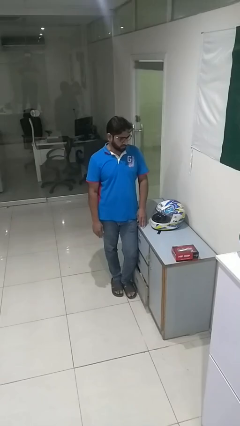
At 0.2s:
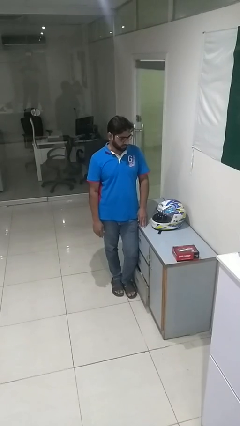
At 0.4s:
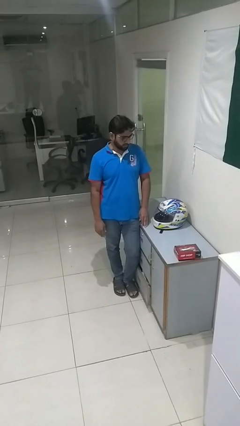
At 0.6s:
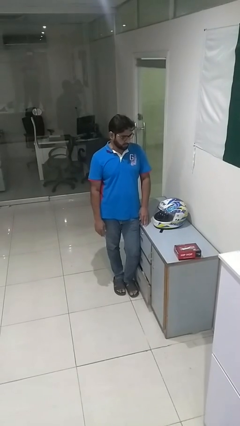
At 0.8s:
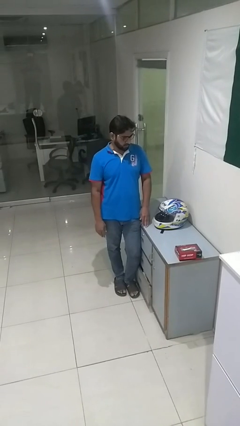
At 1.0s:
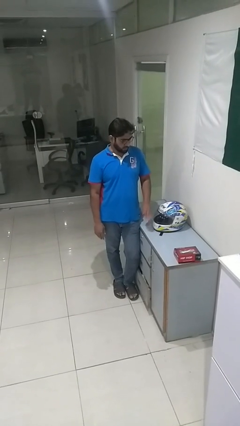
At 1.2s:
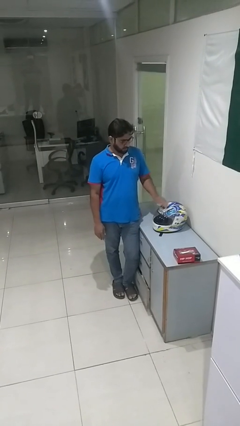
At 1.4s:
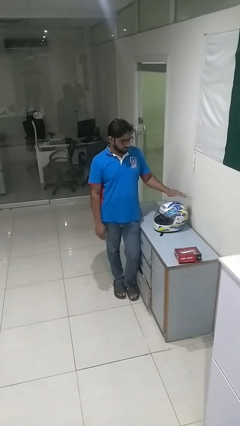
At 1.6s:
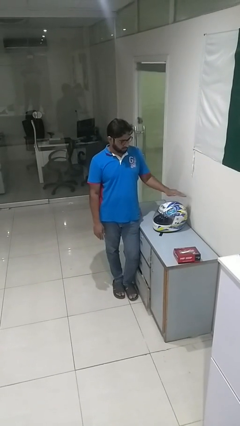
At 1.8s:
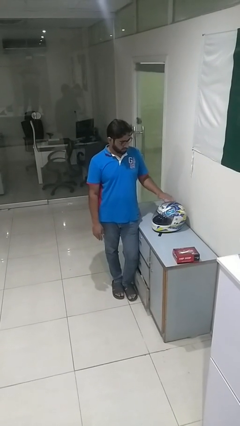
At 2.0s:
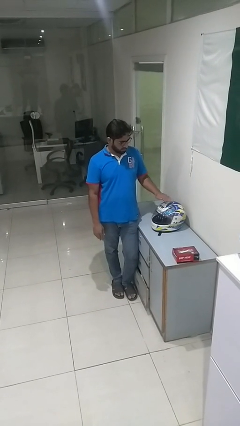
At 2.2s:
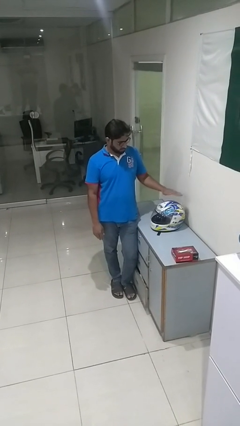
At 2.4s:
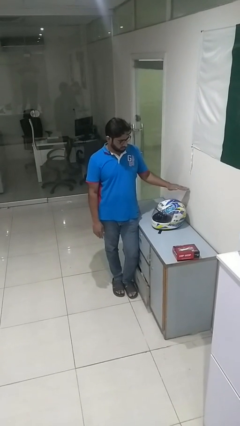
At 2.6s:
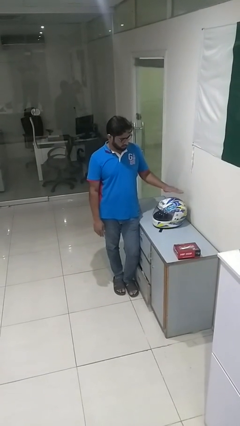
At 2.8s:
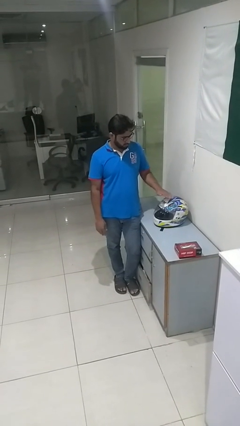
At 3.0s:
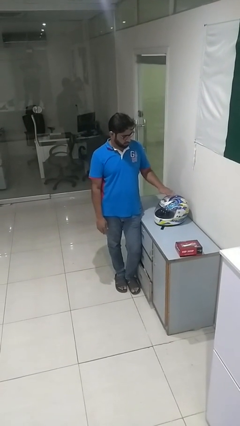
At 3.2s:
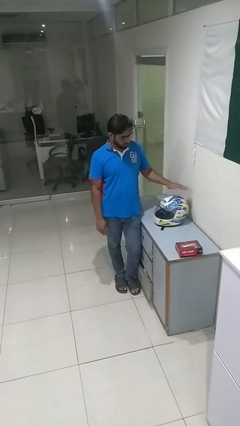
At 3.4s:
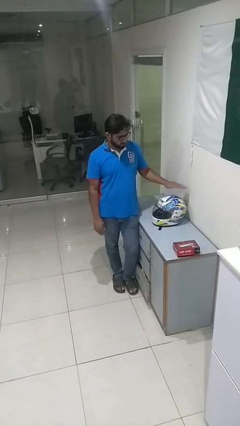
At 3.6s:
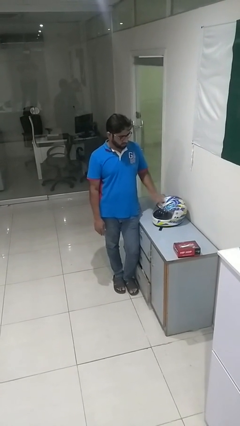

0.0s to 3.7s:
person waves hand over object

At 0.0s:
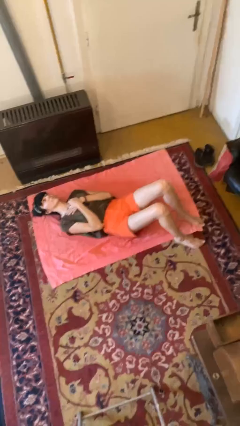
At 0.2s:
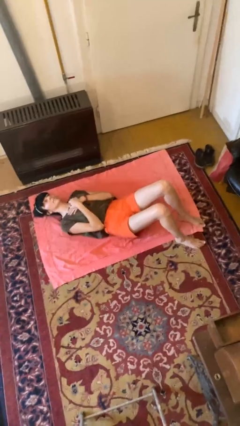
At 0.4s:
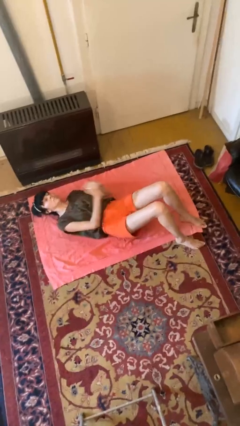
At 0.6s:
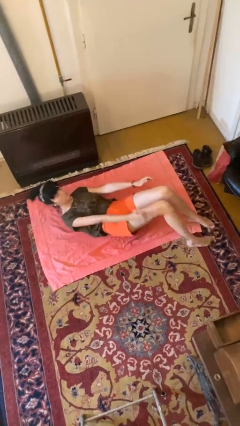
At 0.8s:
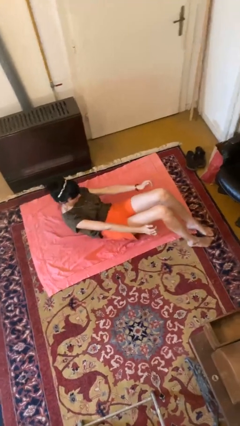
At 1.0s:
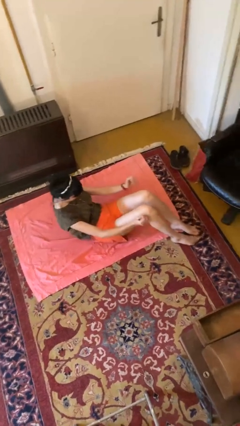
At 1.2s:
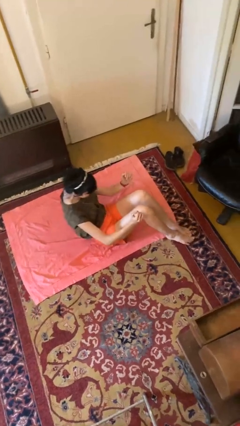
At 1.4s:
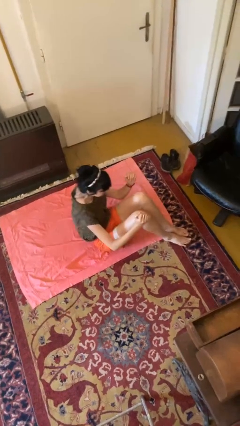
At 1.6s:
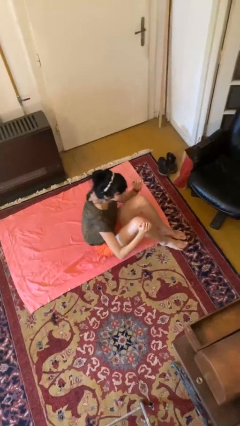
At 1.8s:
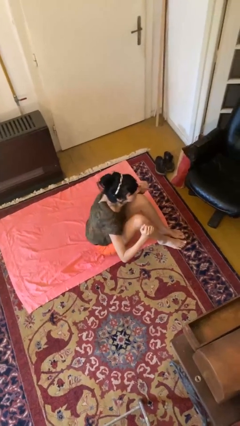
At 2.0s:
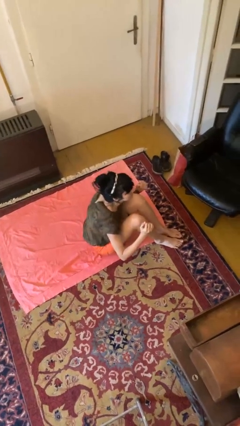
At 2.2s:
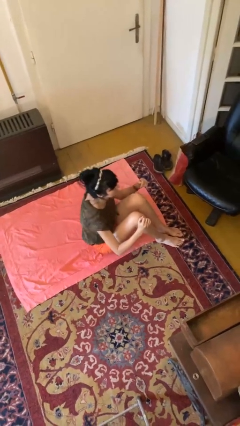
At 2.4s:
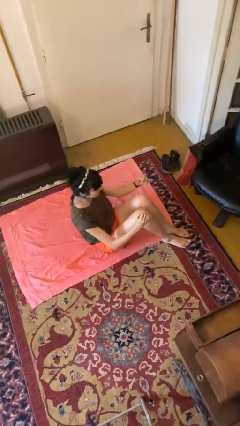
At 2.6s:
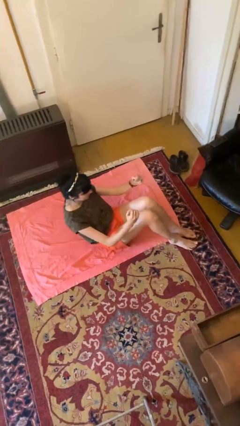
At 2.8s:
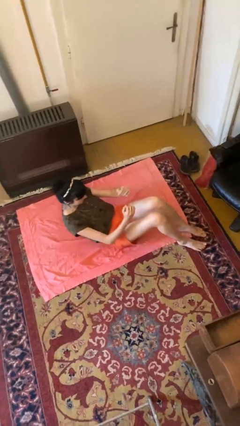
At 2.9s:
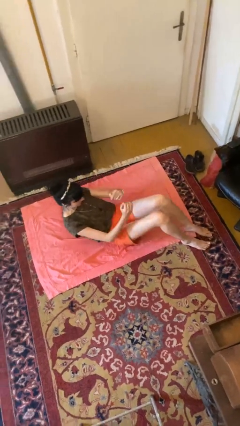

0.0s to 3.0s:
person exercises with situp

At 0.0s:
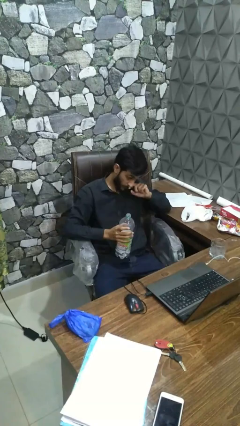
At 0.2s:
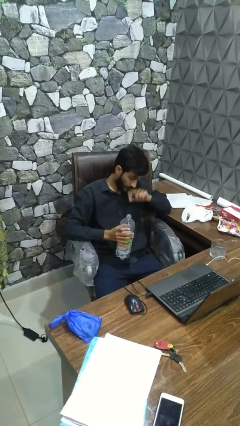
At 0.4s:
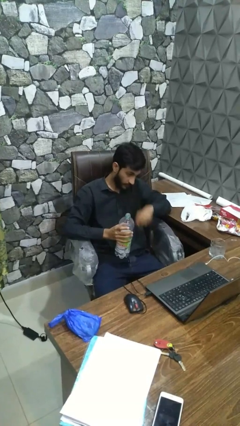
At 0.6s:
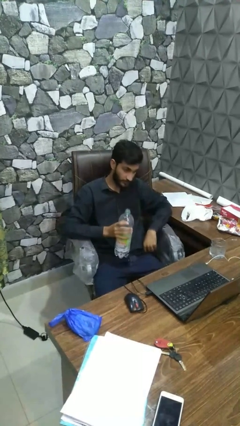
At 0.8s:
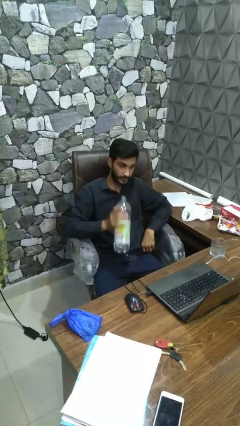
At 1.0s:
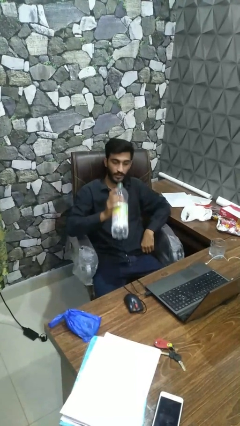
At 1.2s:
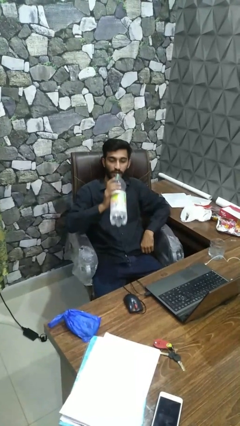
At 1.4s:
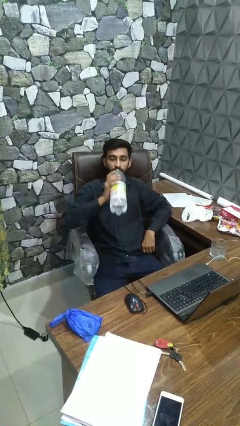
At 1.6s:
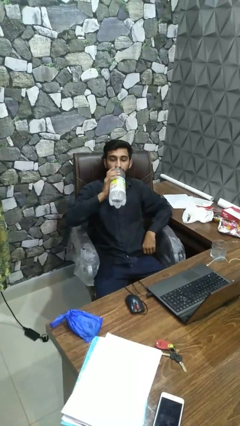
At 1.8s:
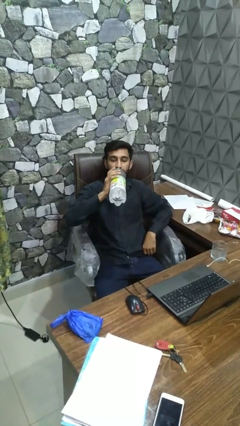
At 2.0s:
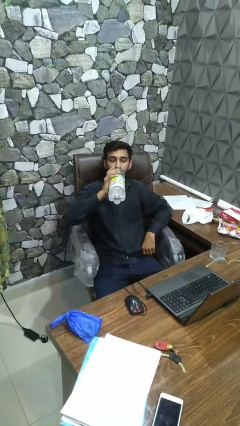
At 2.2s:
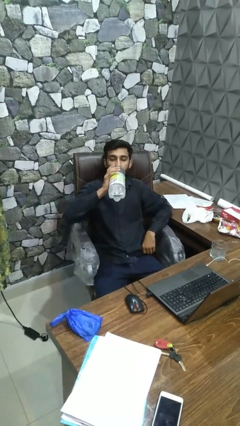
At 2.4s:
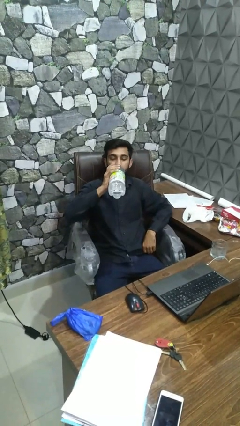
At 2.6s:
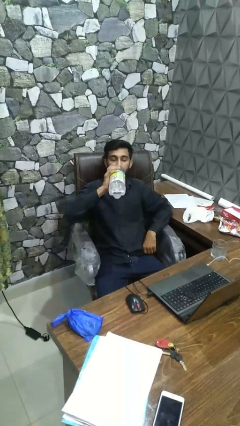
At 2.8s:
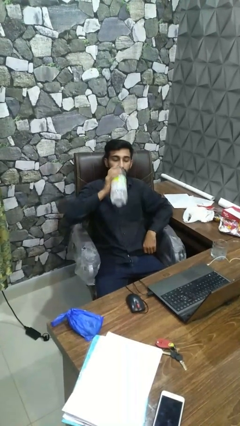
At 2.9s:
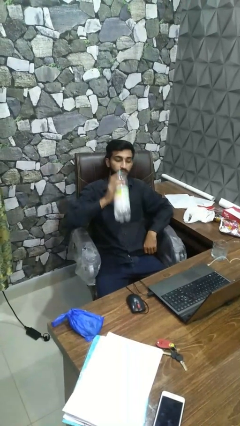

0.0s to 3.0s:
person drinks from bottle

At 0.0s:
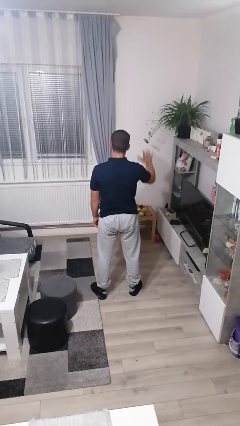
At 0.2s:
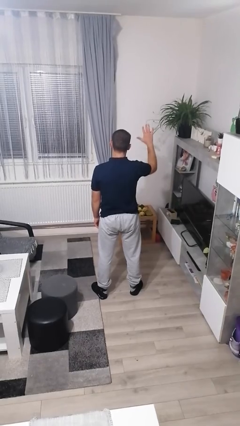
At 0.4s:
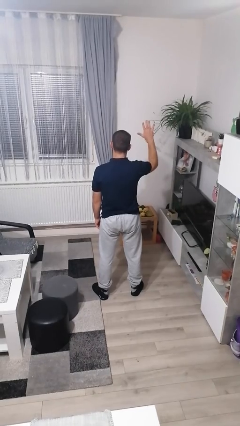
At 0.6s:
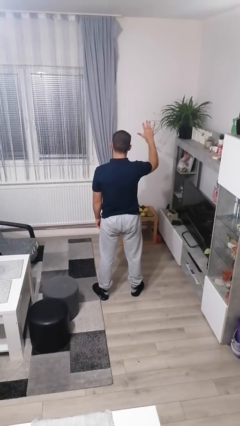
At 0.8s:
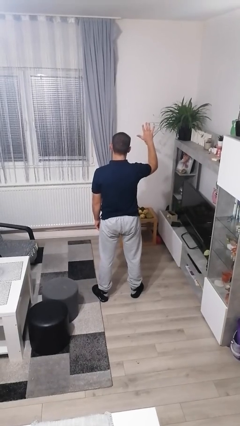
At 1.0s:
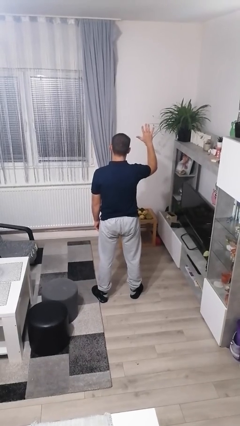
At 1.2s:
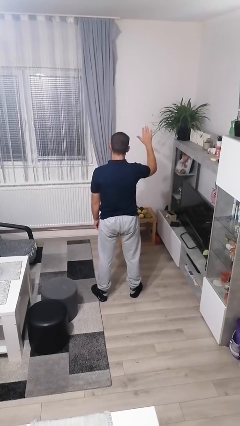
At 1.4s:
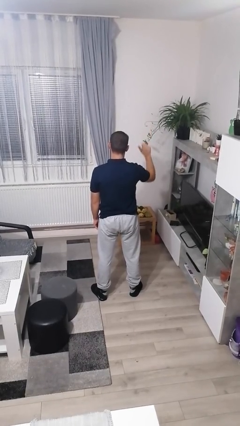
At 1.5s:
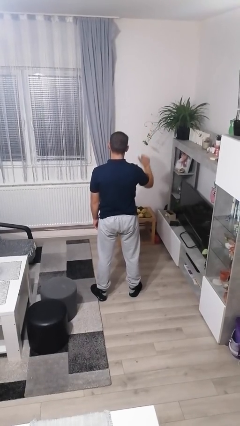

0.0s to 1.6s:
person gestures number five

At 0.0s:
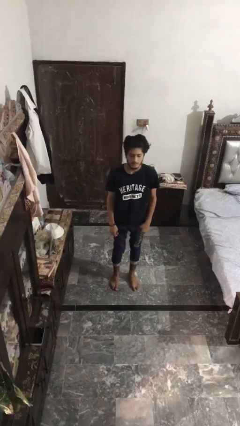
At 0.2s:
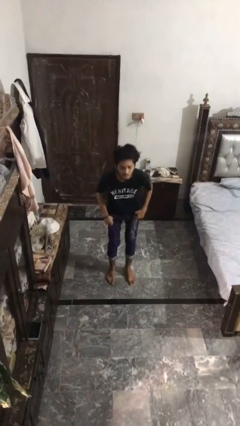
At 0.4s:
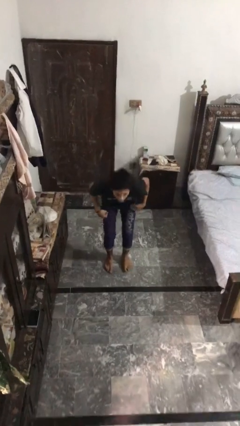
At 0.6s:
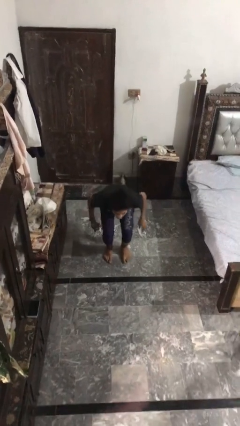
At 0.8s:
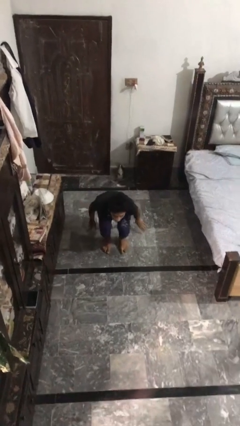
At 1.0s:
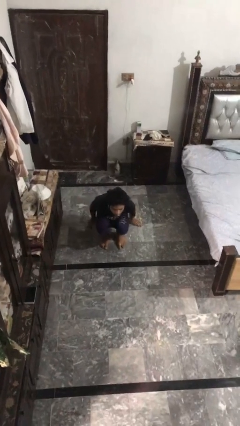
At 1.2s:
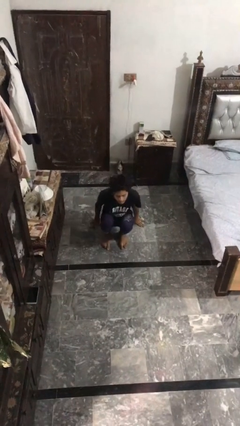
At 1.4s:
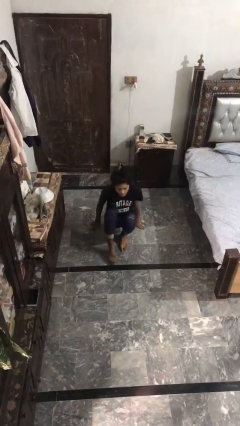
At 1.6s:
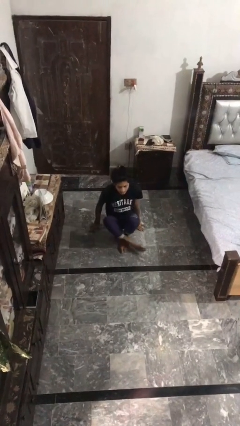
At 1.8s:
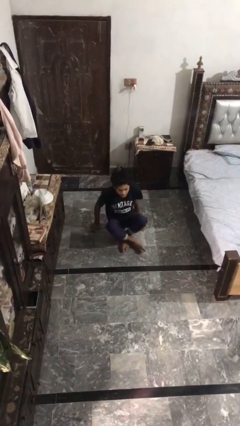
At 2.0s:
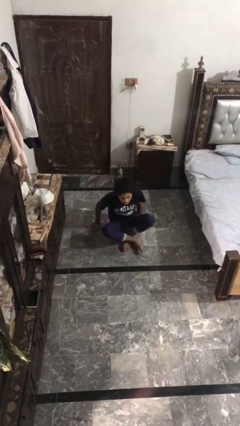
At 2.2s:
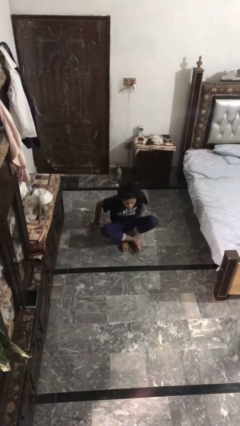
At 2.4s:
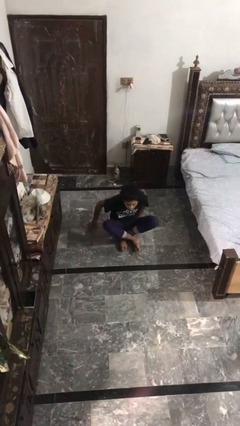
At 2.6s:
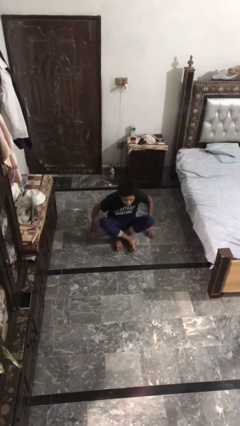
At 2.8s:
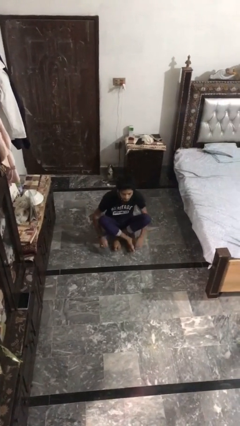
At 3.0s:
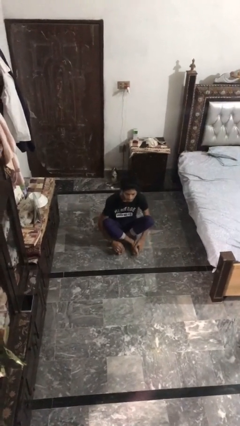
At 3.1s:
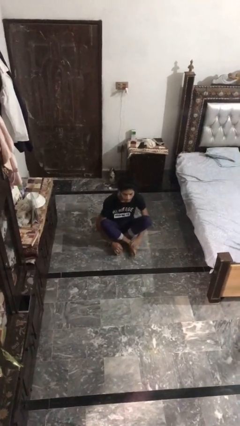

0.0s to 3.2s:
person sits crisscross

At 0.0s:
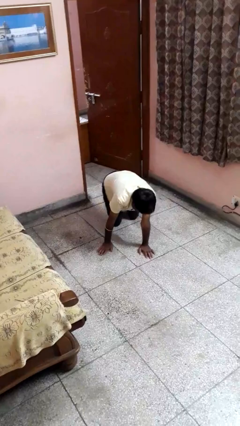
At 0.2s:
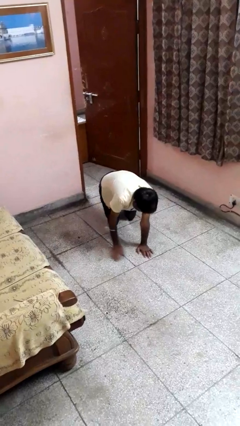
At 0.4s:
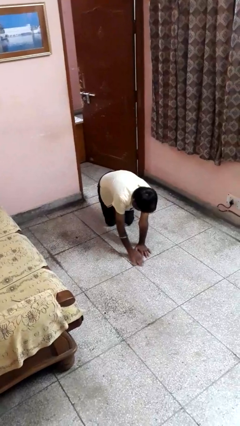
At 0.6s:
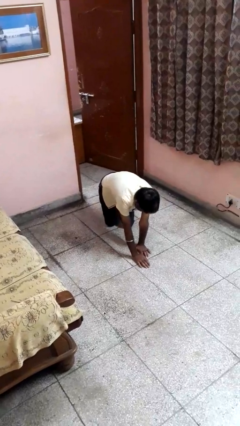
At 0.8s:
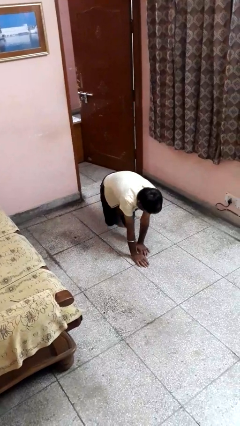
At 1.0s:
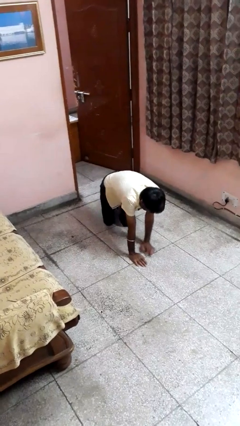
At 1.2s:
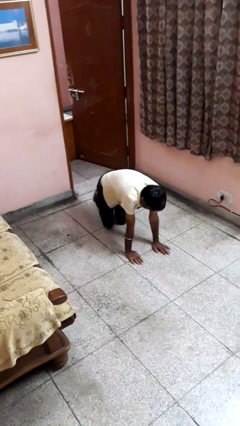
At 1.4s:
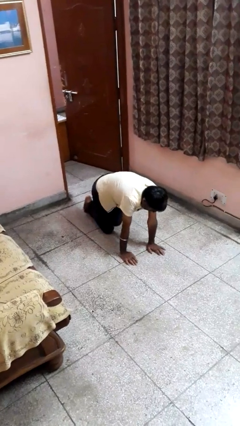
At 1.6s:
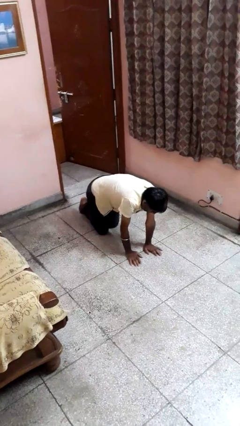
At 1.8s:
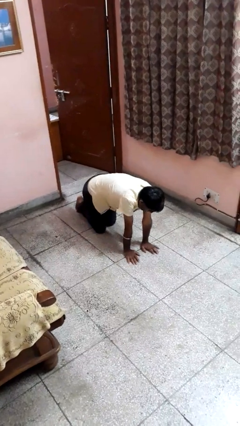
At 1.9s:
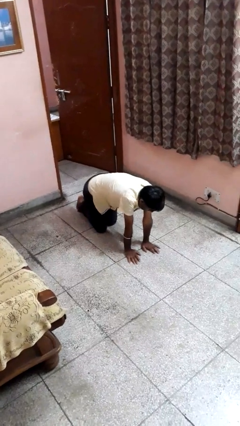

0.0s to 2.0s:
person crawls

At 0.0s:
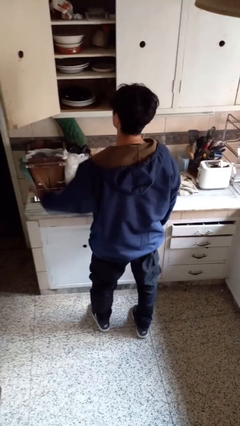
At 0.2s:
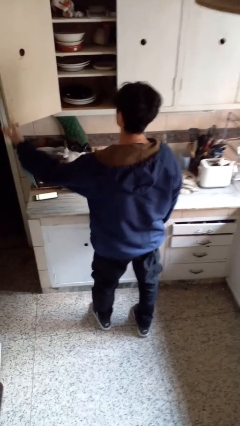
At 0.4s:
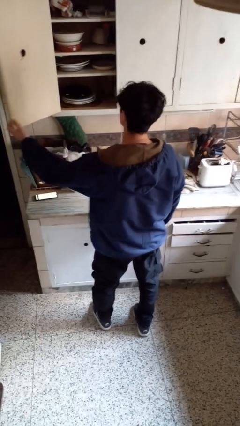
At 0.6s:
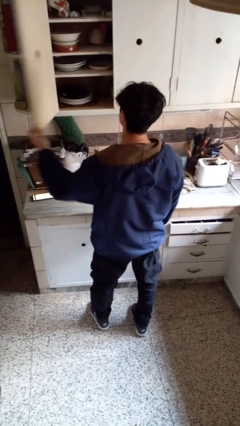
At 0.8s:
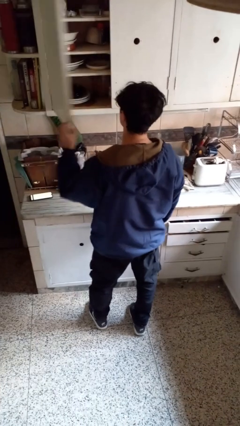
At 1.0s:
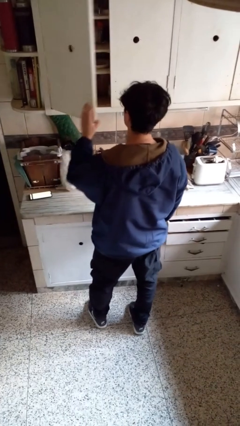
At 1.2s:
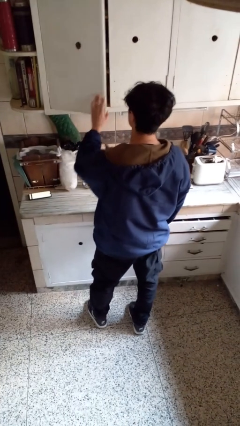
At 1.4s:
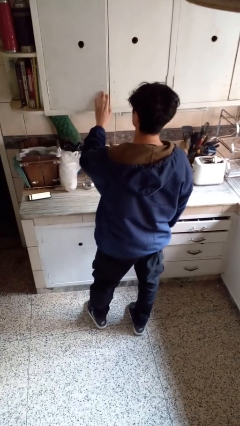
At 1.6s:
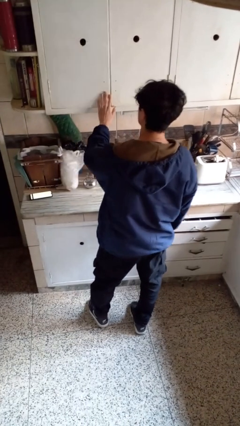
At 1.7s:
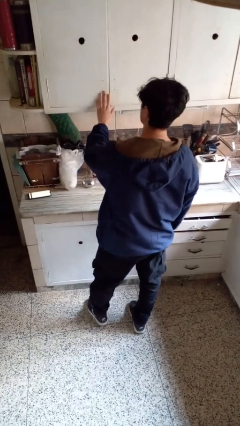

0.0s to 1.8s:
person closes cabinet
